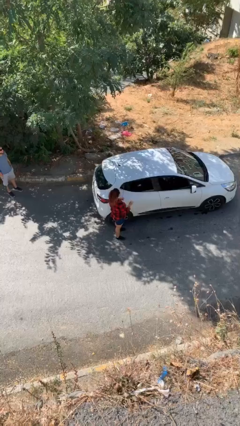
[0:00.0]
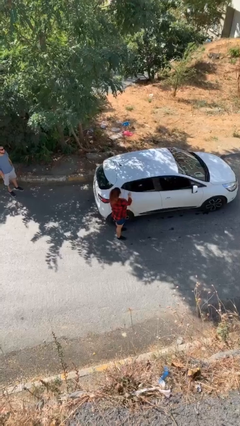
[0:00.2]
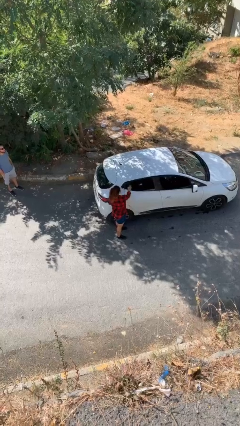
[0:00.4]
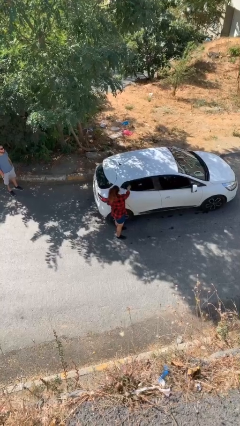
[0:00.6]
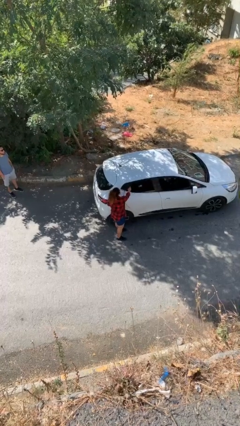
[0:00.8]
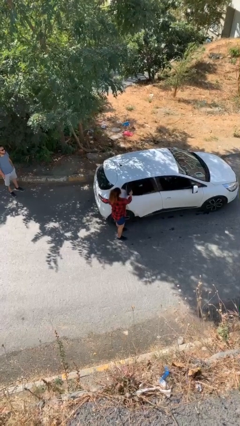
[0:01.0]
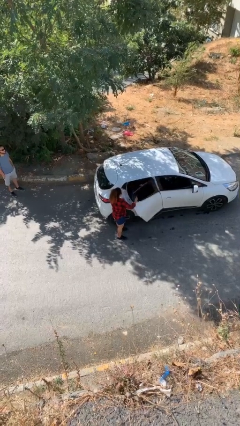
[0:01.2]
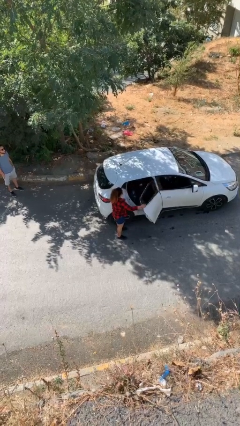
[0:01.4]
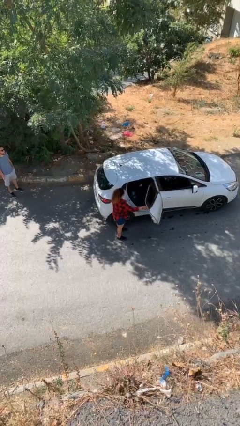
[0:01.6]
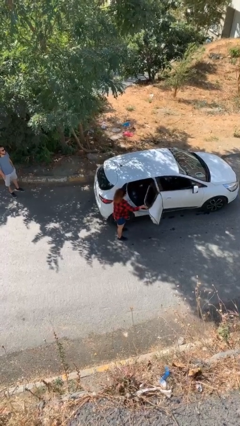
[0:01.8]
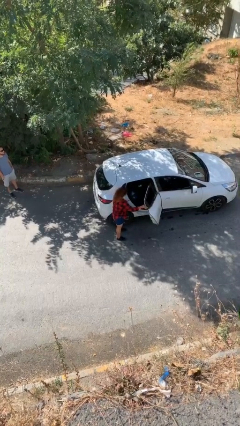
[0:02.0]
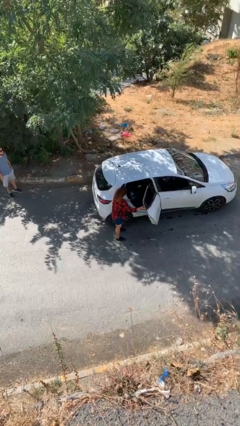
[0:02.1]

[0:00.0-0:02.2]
person opens car door

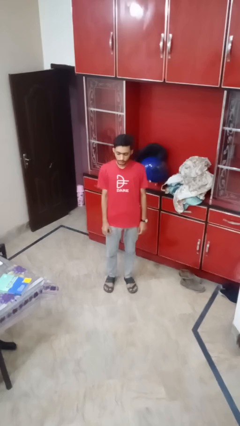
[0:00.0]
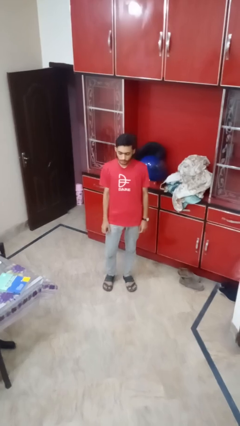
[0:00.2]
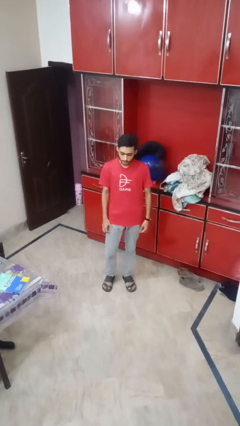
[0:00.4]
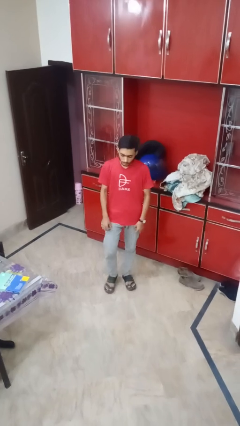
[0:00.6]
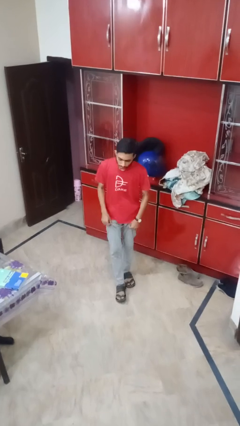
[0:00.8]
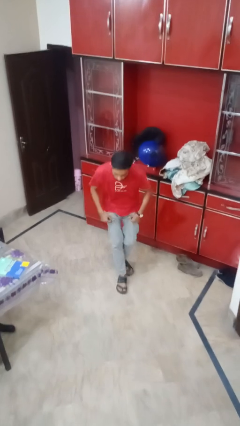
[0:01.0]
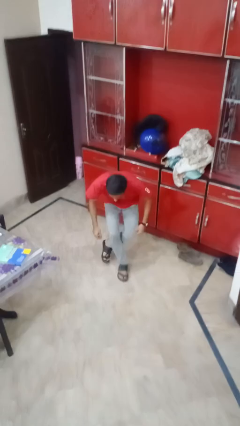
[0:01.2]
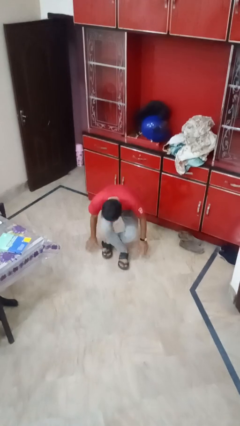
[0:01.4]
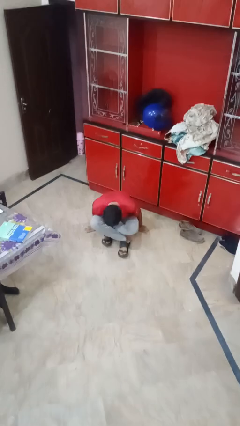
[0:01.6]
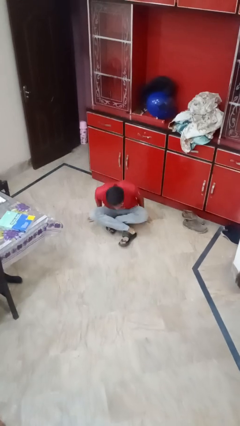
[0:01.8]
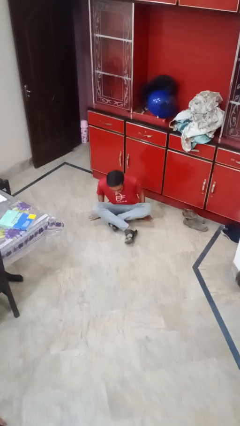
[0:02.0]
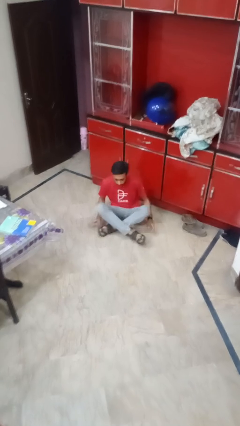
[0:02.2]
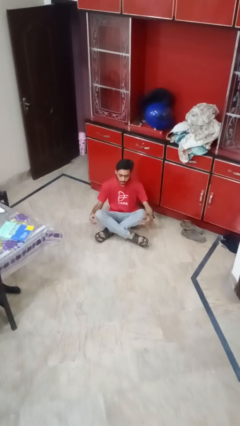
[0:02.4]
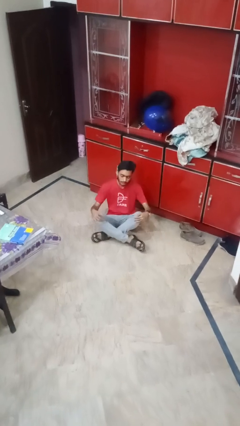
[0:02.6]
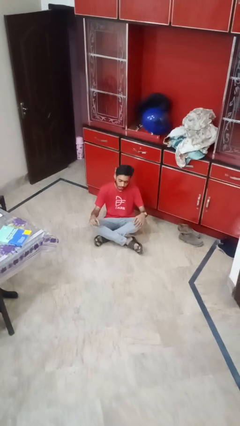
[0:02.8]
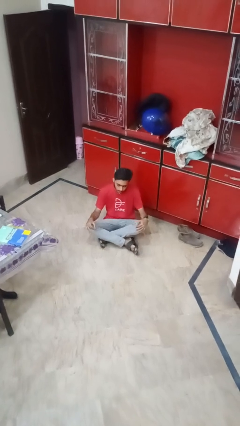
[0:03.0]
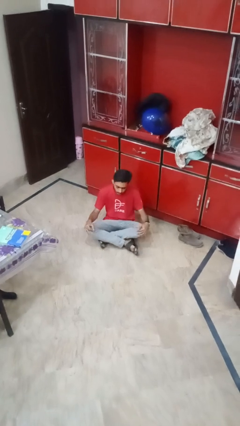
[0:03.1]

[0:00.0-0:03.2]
person sits crisscross

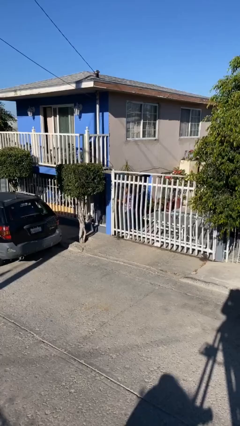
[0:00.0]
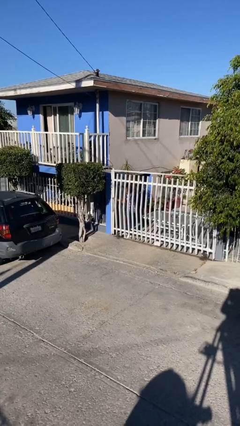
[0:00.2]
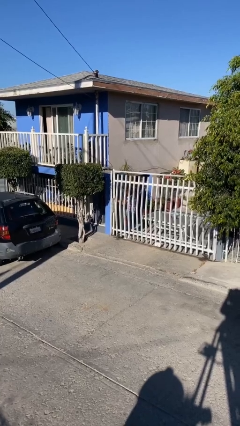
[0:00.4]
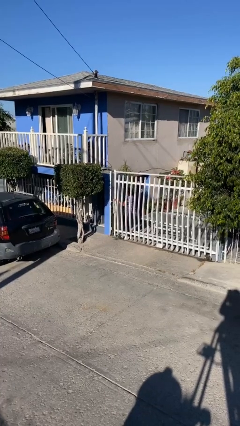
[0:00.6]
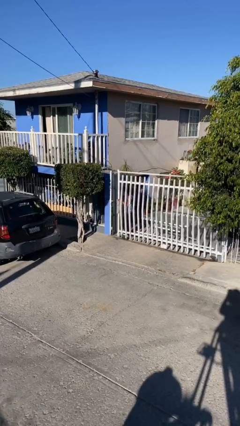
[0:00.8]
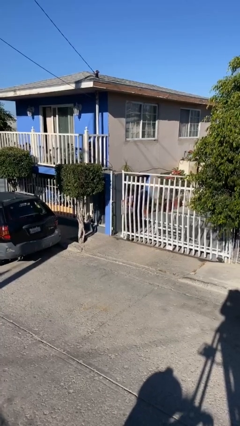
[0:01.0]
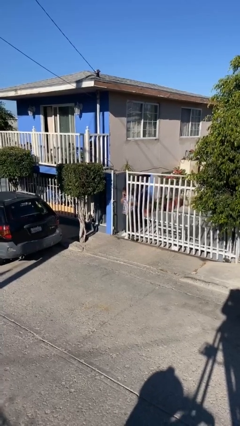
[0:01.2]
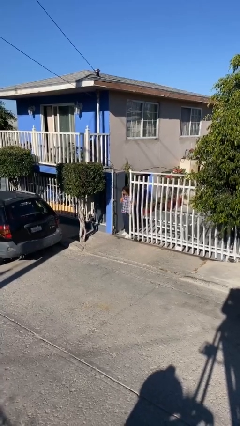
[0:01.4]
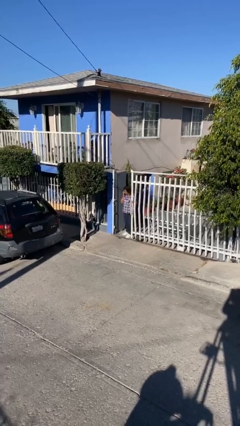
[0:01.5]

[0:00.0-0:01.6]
person opens facility door

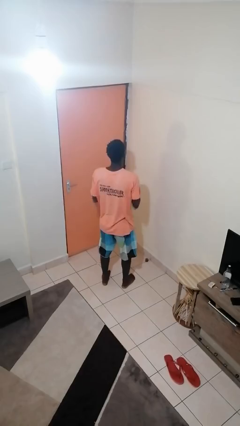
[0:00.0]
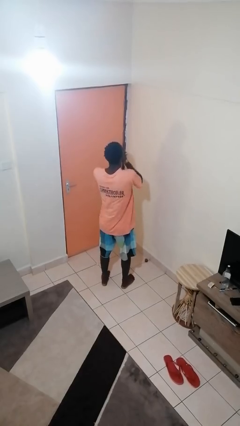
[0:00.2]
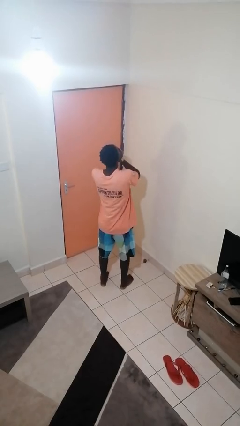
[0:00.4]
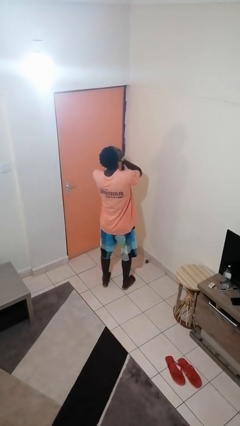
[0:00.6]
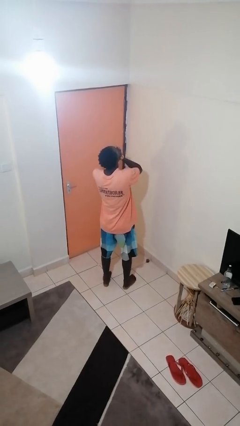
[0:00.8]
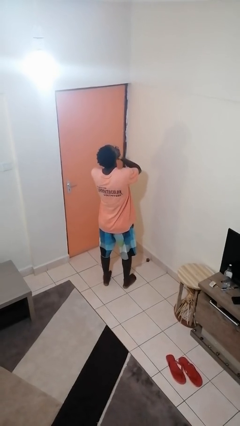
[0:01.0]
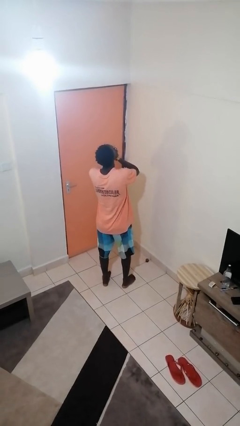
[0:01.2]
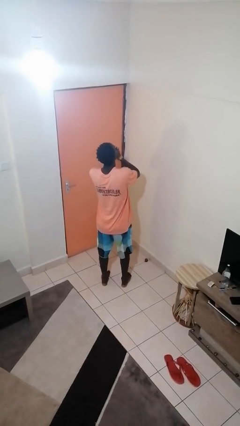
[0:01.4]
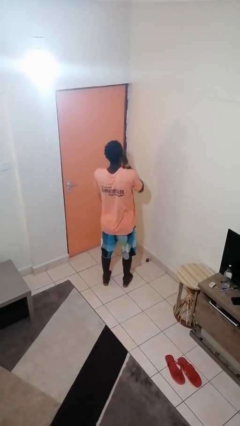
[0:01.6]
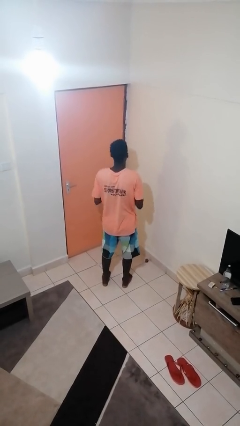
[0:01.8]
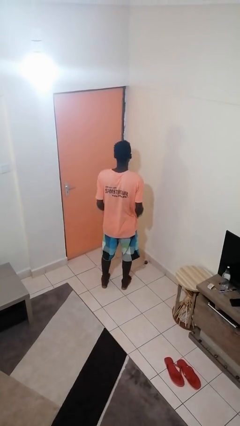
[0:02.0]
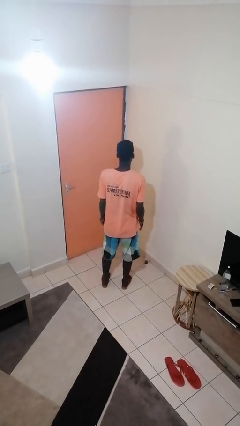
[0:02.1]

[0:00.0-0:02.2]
person yawns

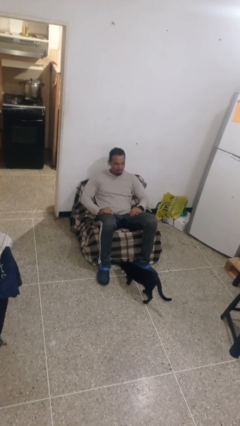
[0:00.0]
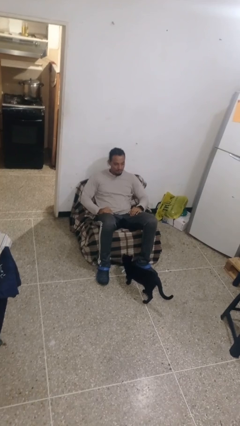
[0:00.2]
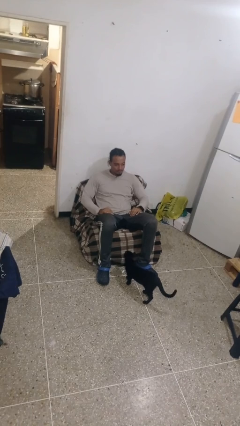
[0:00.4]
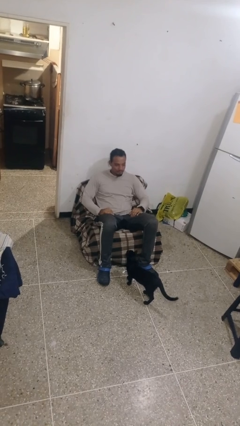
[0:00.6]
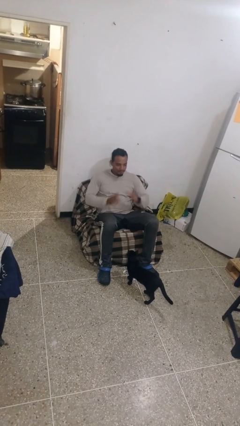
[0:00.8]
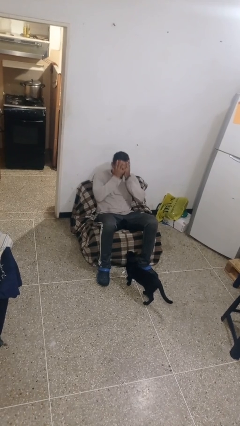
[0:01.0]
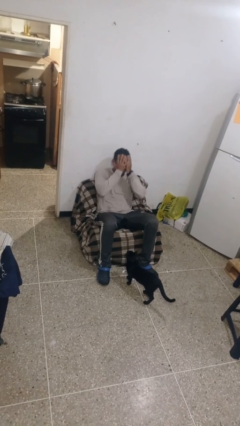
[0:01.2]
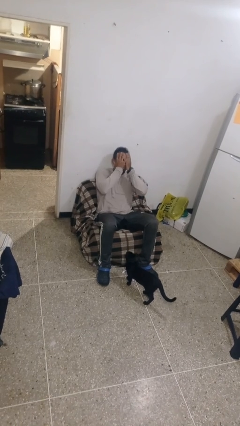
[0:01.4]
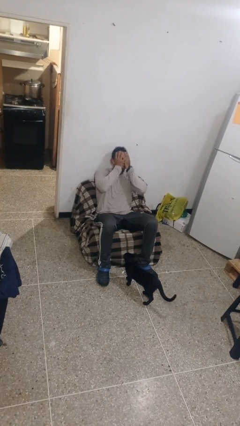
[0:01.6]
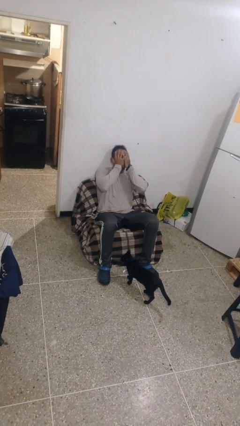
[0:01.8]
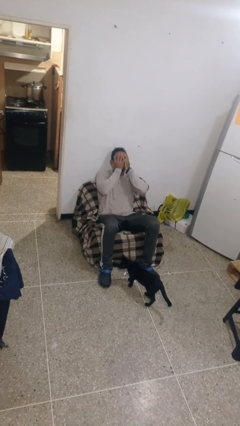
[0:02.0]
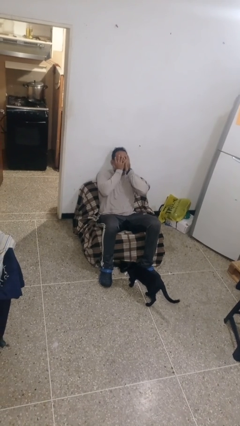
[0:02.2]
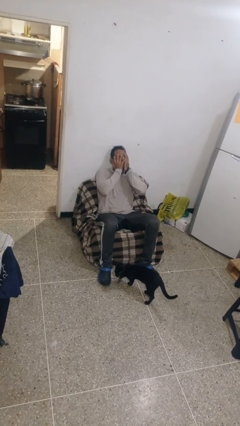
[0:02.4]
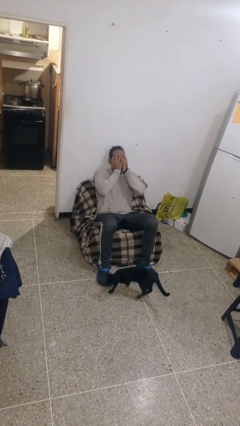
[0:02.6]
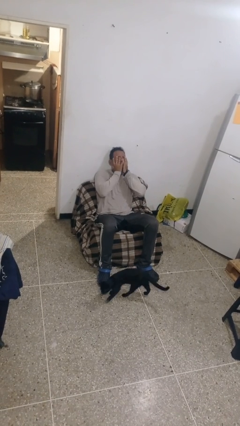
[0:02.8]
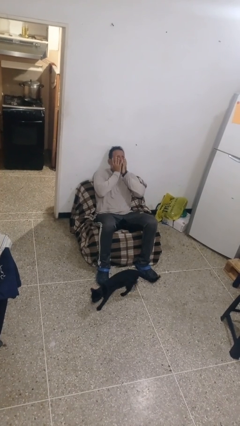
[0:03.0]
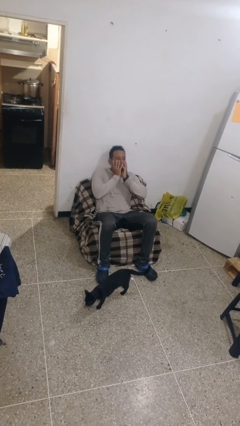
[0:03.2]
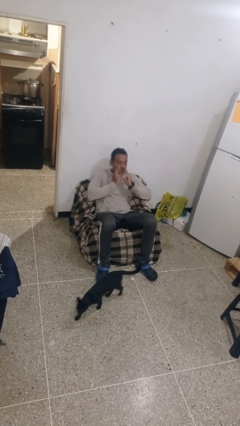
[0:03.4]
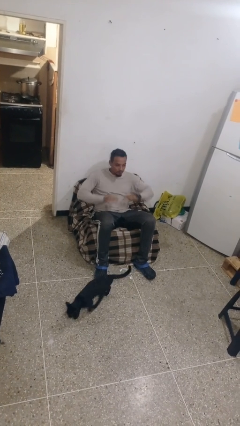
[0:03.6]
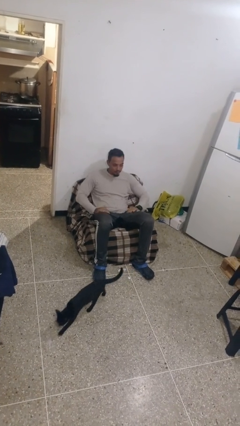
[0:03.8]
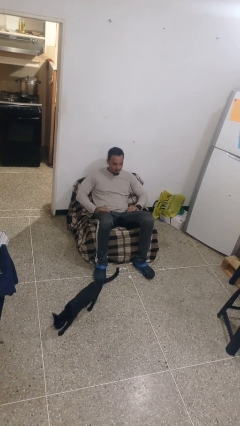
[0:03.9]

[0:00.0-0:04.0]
person covers face with hands

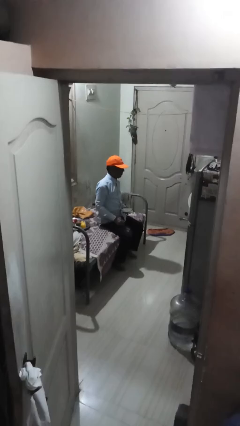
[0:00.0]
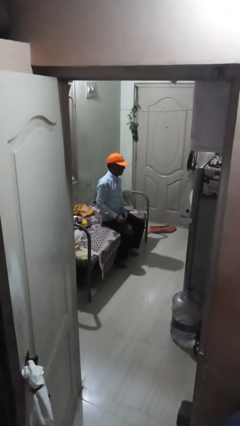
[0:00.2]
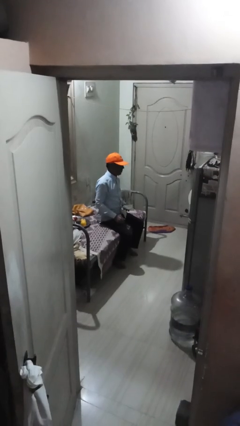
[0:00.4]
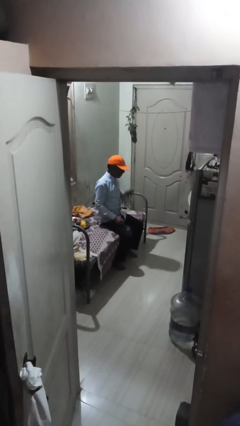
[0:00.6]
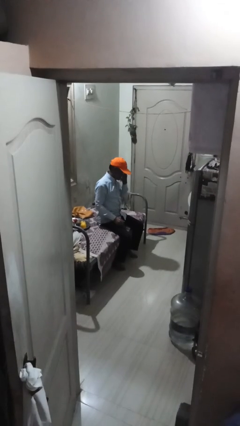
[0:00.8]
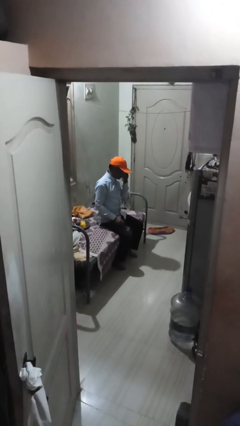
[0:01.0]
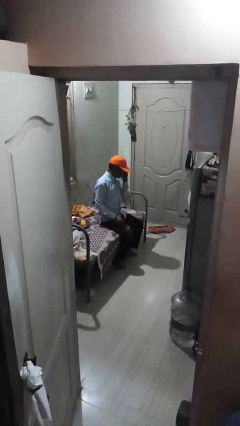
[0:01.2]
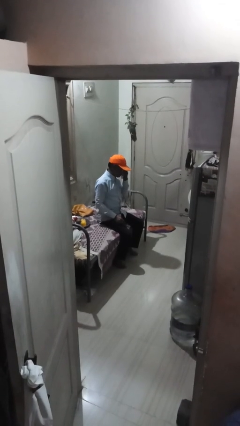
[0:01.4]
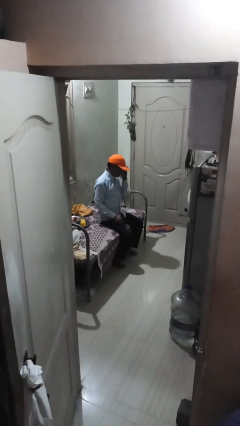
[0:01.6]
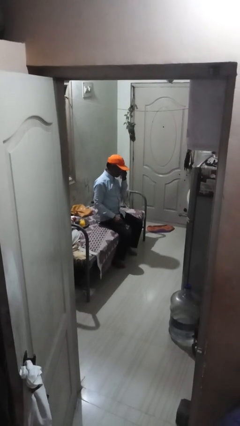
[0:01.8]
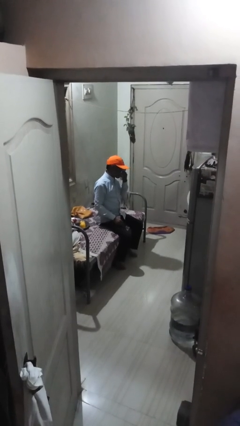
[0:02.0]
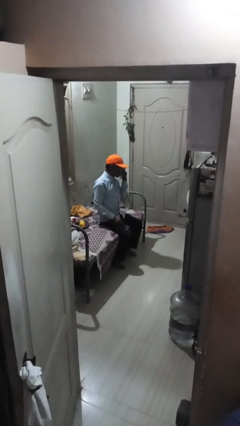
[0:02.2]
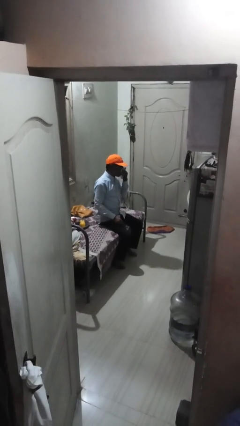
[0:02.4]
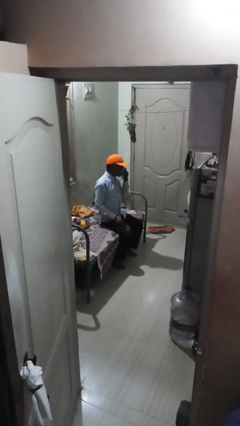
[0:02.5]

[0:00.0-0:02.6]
person blows nose

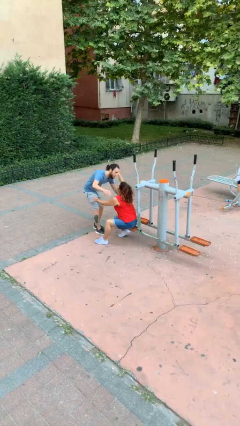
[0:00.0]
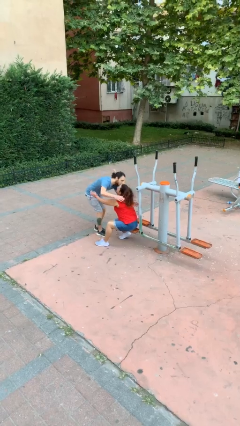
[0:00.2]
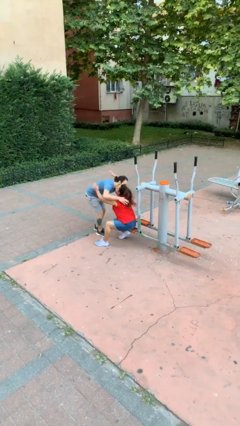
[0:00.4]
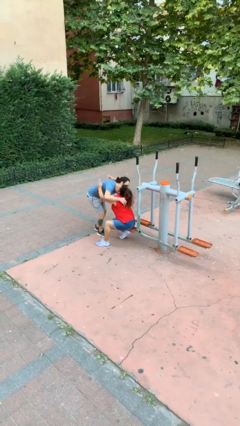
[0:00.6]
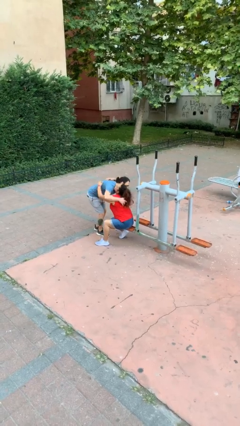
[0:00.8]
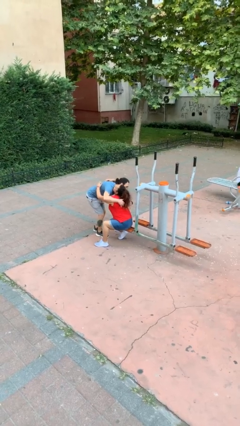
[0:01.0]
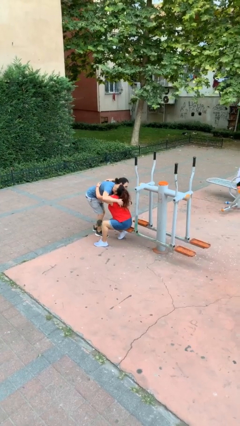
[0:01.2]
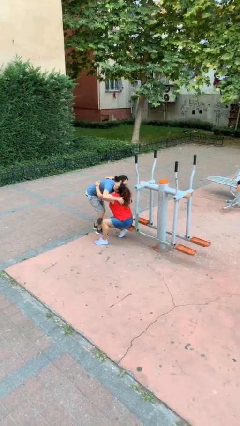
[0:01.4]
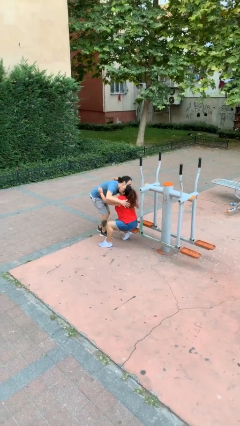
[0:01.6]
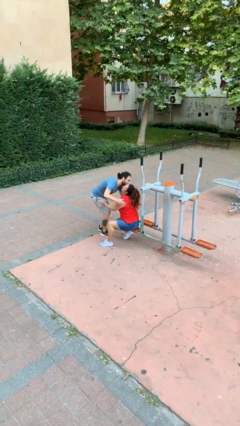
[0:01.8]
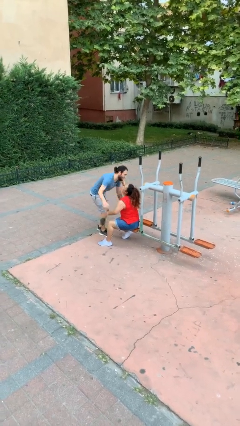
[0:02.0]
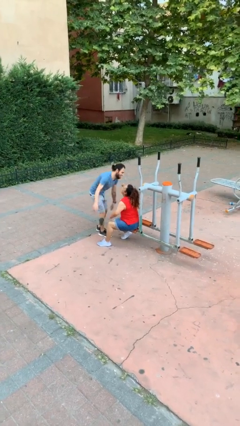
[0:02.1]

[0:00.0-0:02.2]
person embraces person
